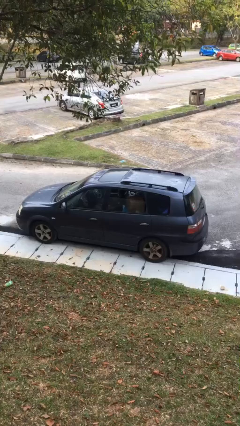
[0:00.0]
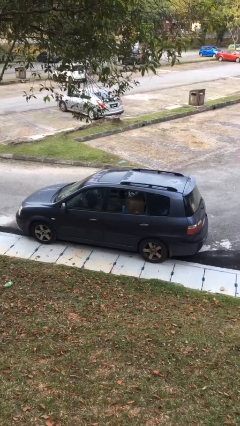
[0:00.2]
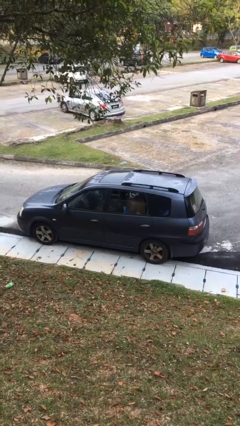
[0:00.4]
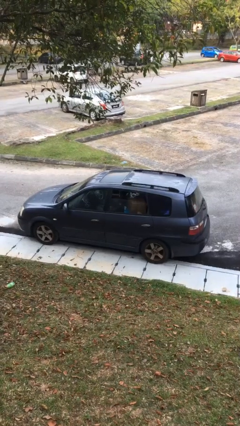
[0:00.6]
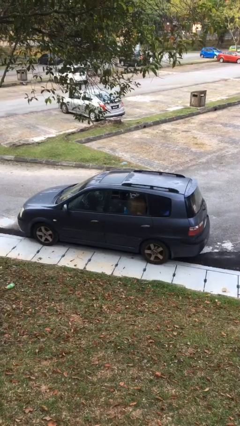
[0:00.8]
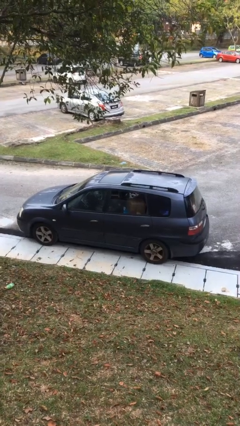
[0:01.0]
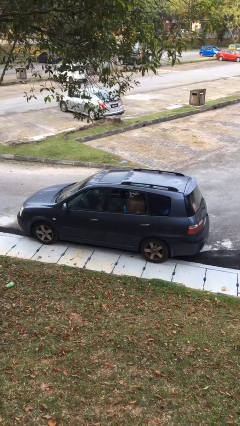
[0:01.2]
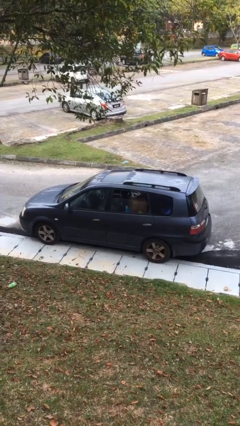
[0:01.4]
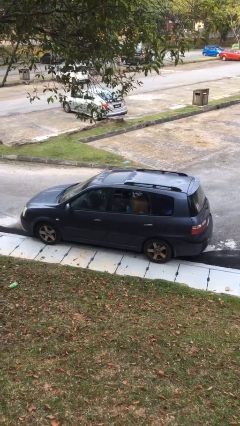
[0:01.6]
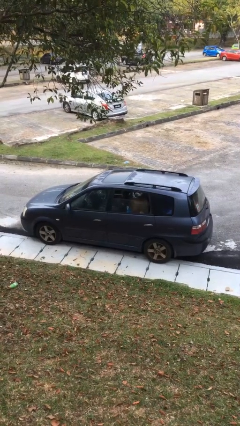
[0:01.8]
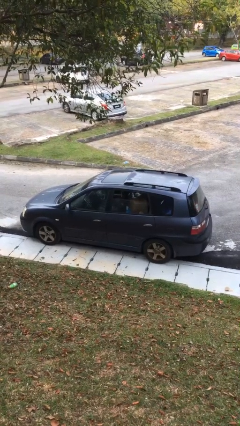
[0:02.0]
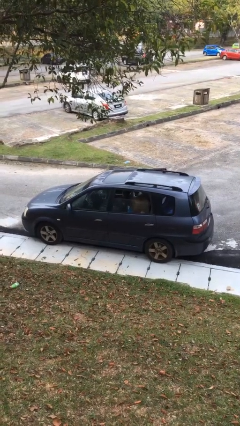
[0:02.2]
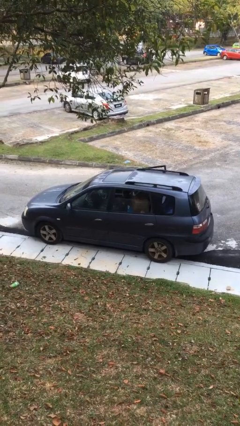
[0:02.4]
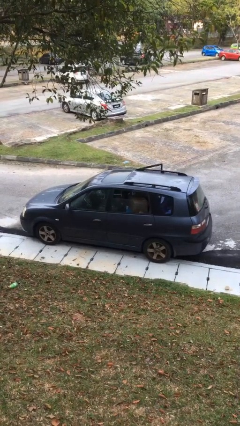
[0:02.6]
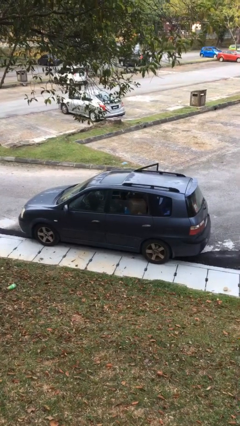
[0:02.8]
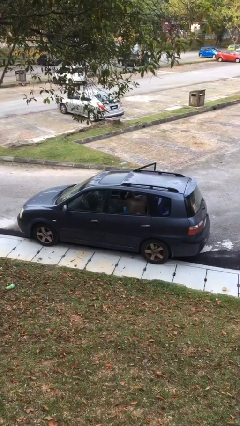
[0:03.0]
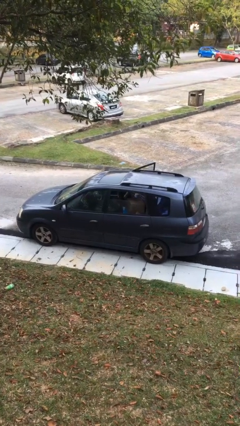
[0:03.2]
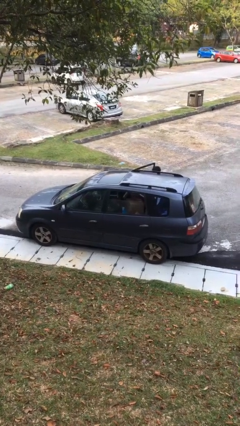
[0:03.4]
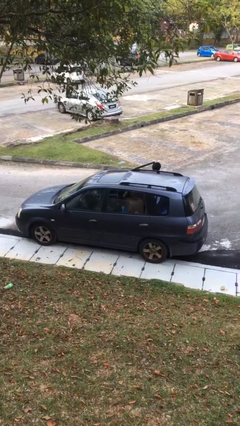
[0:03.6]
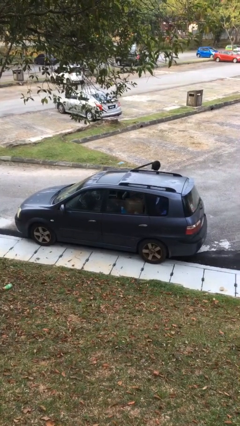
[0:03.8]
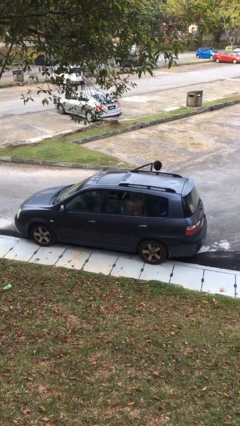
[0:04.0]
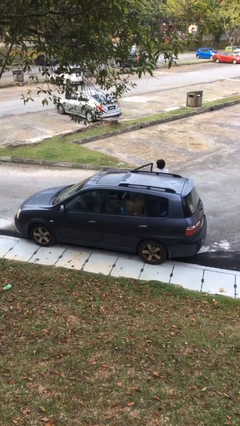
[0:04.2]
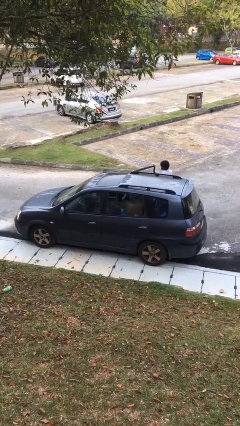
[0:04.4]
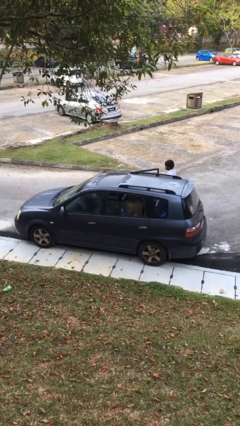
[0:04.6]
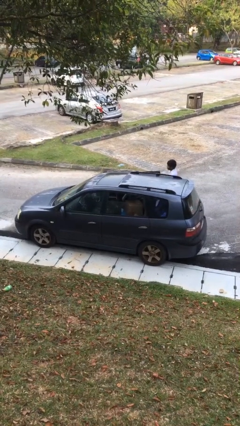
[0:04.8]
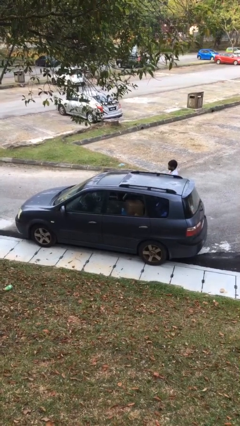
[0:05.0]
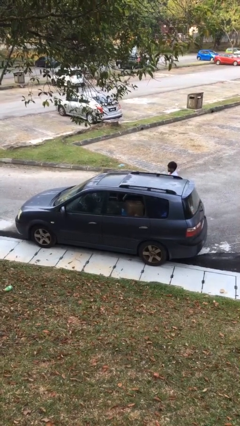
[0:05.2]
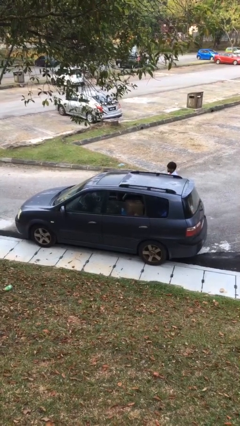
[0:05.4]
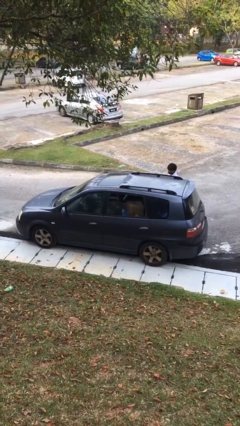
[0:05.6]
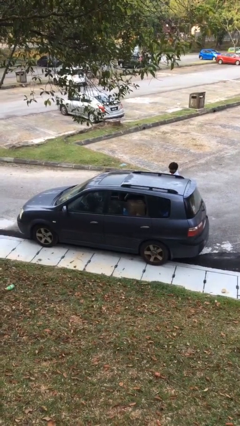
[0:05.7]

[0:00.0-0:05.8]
car drops off person

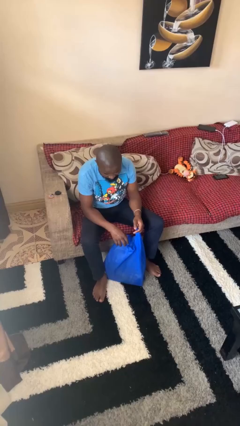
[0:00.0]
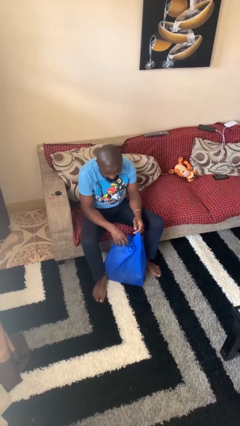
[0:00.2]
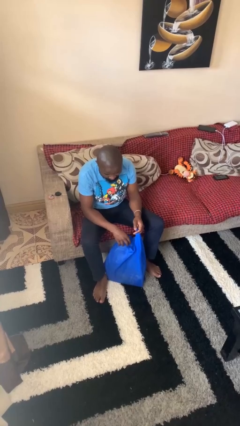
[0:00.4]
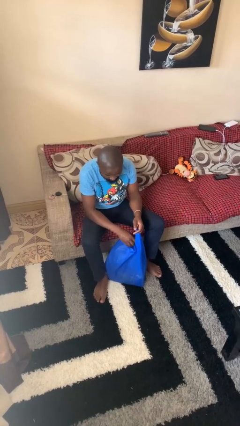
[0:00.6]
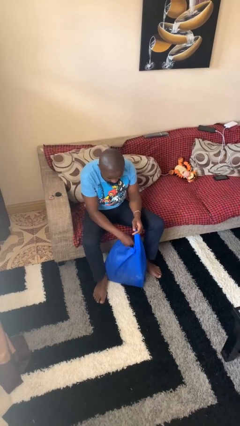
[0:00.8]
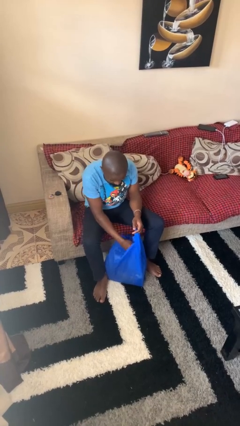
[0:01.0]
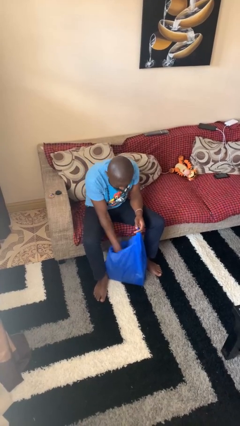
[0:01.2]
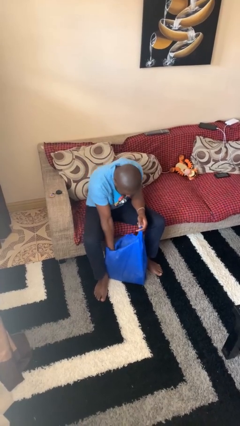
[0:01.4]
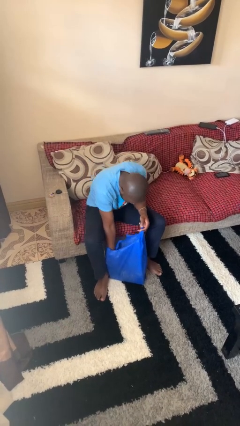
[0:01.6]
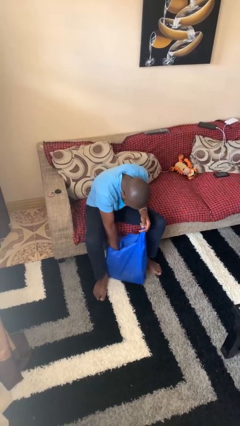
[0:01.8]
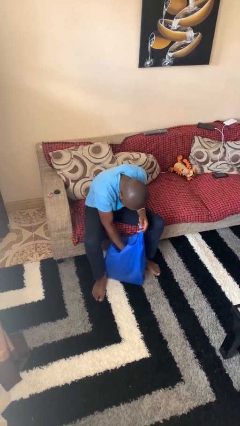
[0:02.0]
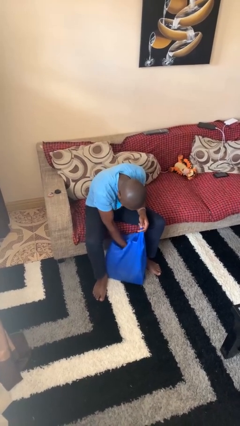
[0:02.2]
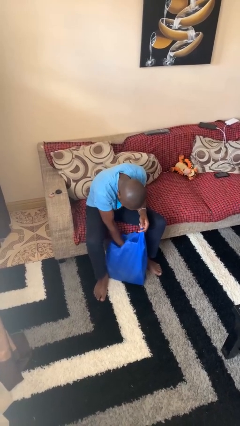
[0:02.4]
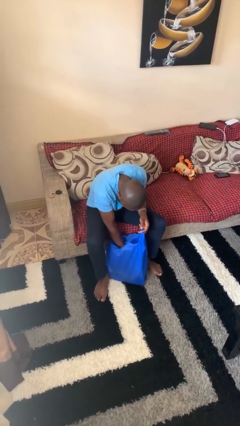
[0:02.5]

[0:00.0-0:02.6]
person searches in bag

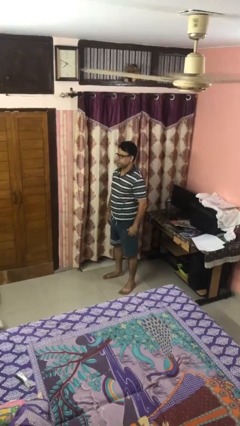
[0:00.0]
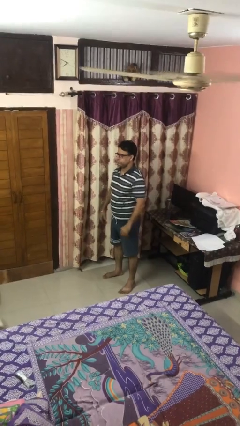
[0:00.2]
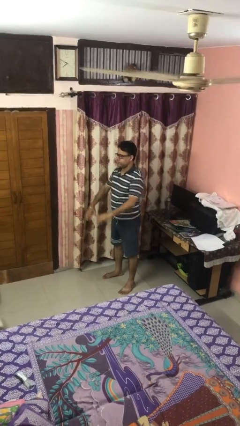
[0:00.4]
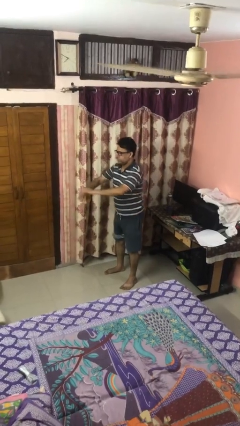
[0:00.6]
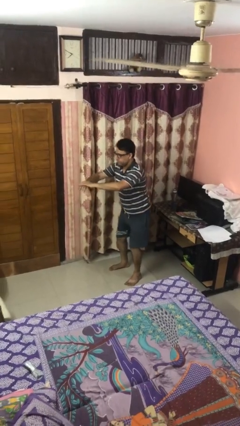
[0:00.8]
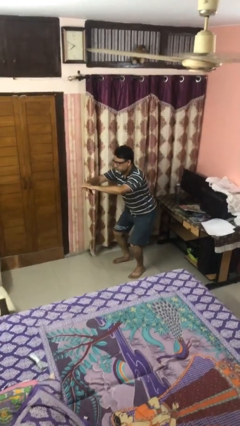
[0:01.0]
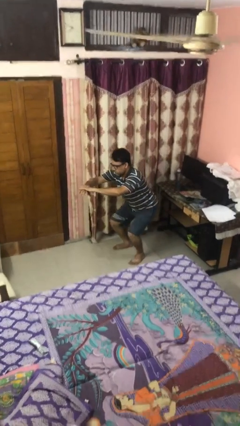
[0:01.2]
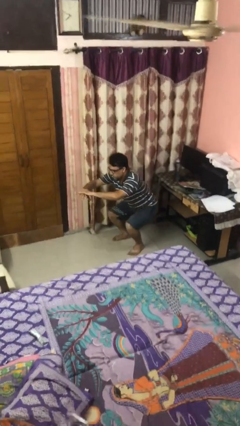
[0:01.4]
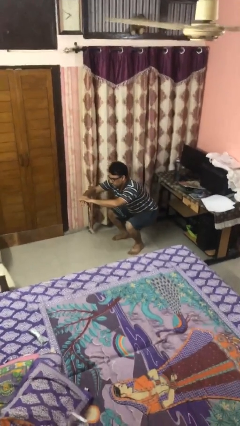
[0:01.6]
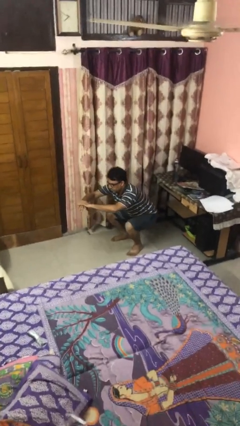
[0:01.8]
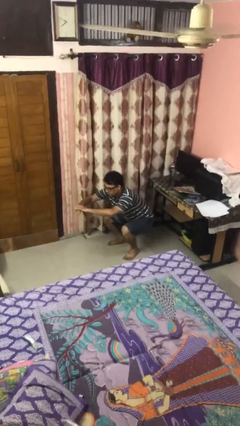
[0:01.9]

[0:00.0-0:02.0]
person squats

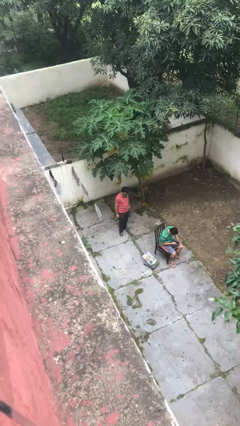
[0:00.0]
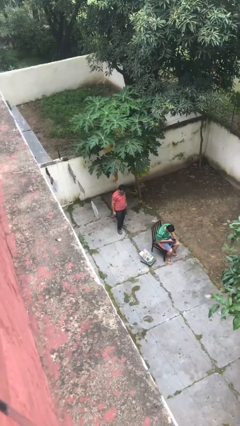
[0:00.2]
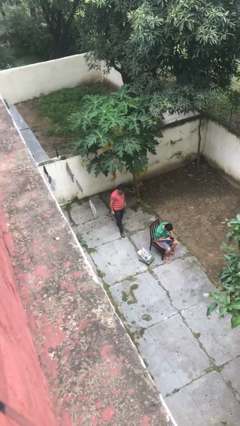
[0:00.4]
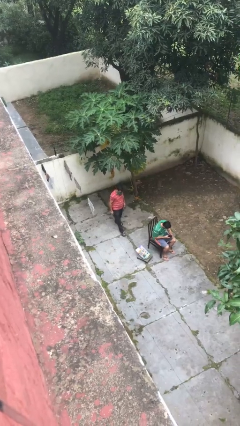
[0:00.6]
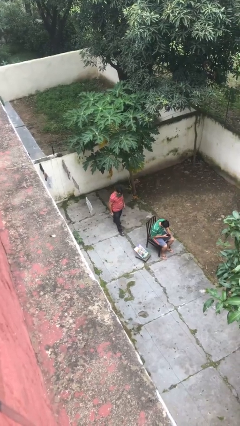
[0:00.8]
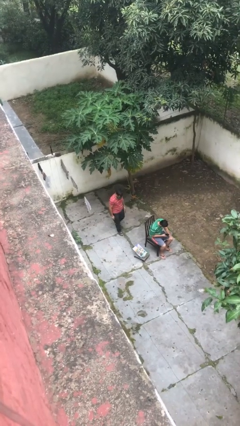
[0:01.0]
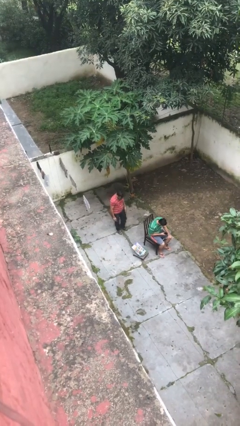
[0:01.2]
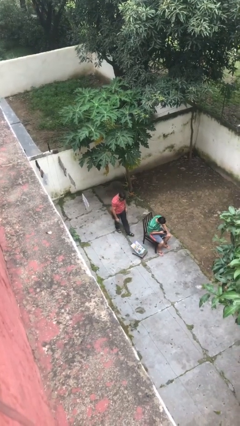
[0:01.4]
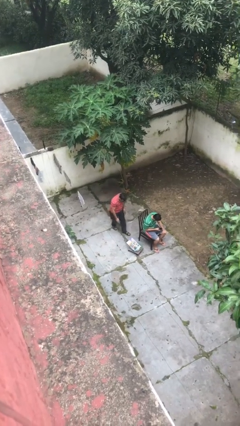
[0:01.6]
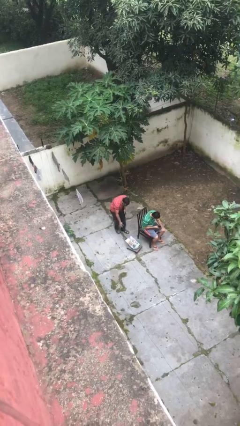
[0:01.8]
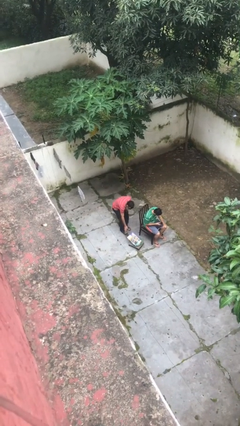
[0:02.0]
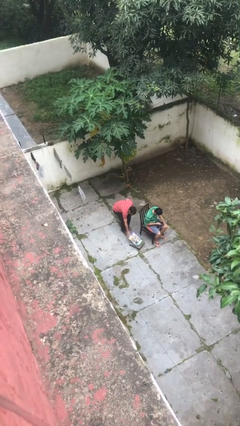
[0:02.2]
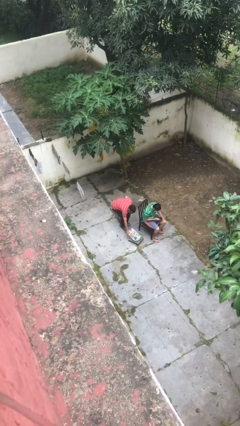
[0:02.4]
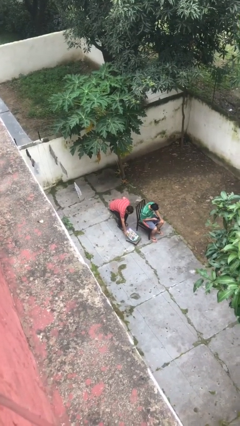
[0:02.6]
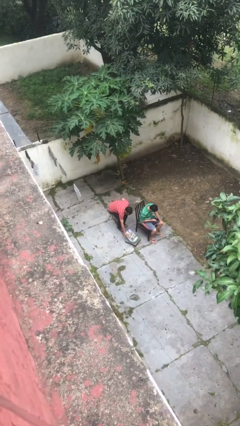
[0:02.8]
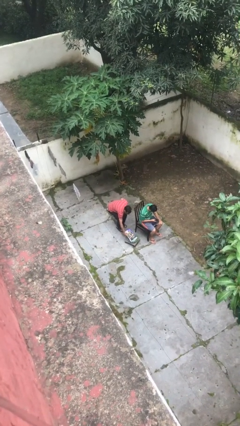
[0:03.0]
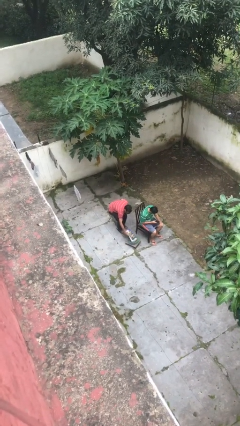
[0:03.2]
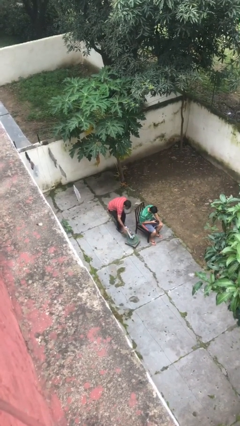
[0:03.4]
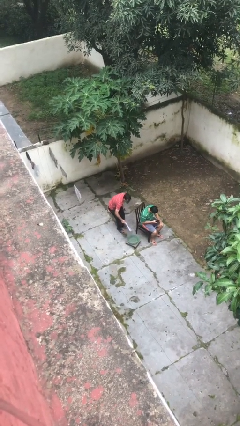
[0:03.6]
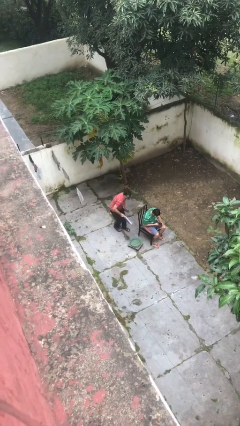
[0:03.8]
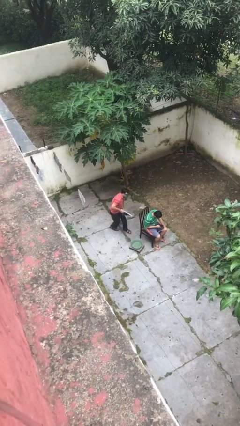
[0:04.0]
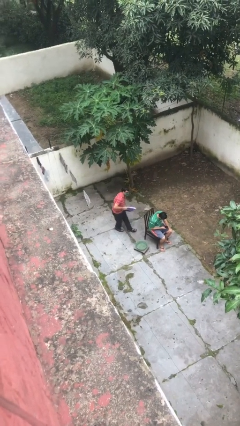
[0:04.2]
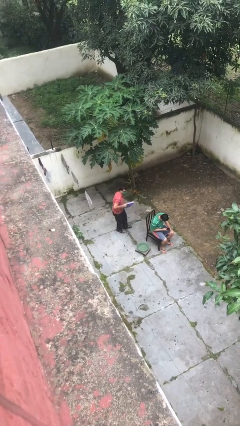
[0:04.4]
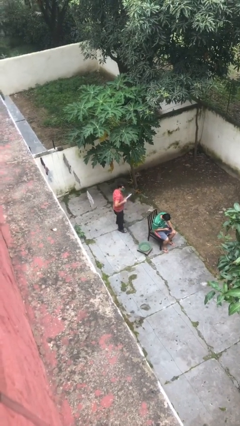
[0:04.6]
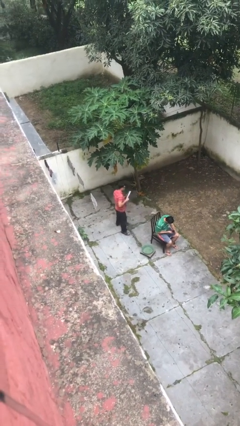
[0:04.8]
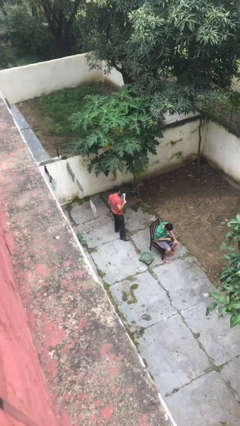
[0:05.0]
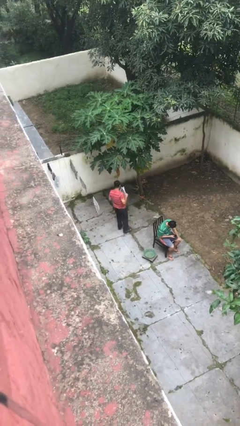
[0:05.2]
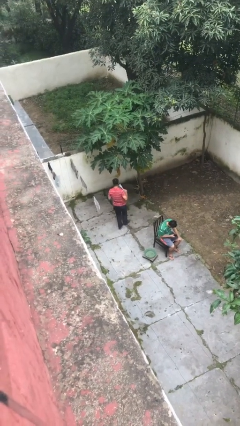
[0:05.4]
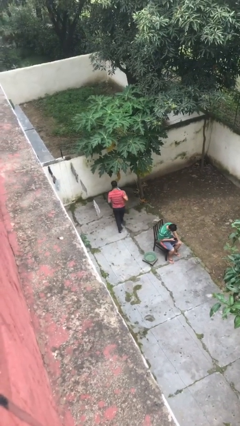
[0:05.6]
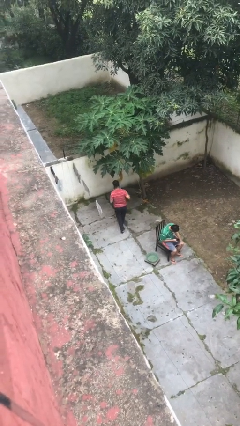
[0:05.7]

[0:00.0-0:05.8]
person steals object from person

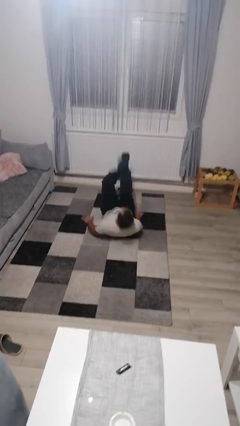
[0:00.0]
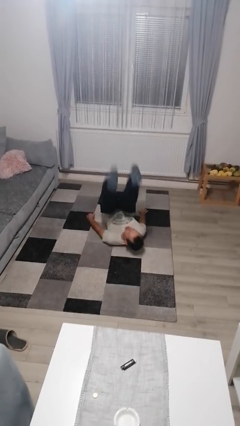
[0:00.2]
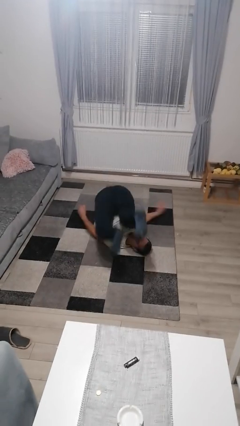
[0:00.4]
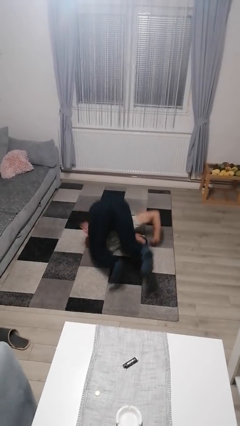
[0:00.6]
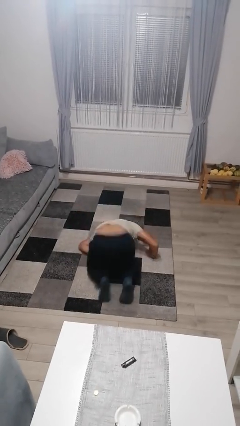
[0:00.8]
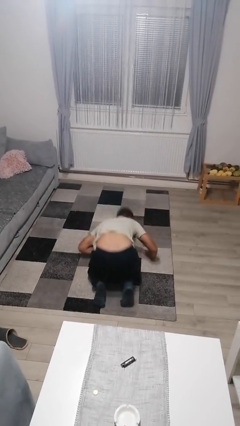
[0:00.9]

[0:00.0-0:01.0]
person somersaults

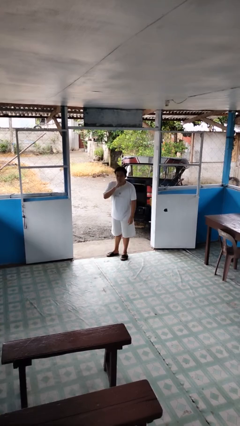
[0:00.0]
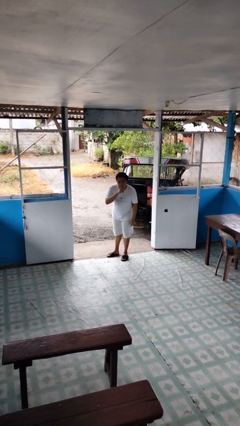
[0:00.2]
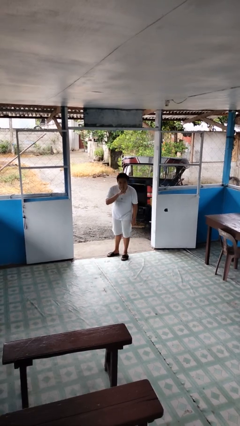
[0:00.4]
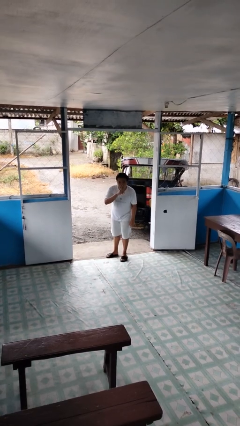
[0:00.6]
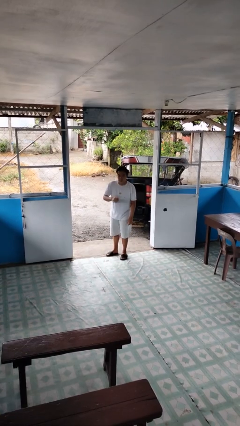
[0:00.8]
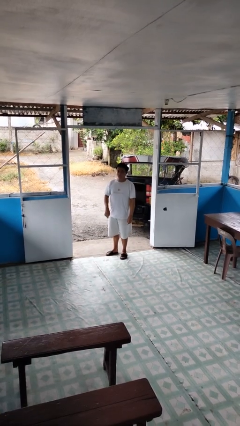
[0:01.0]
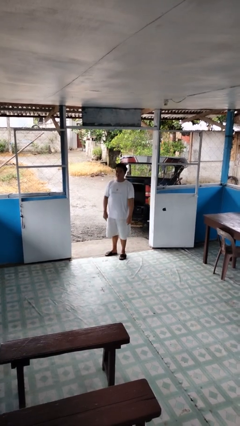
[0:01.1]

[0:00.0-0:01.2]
person gestures be quiet
